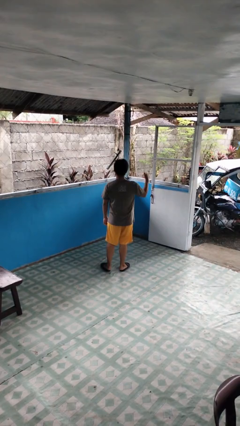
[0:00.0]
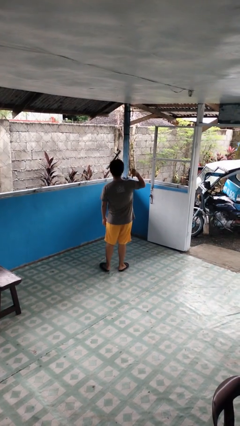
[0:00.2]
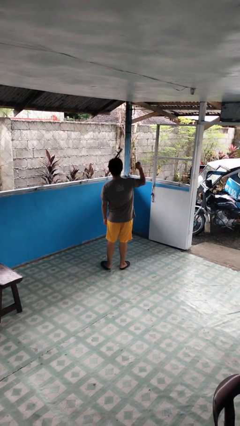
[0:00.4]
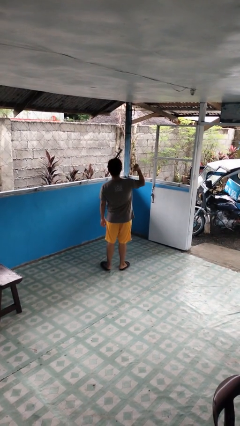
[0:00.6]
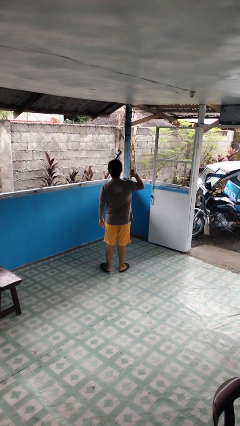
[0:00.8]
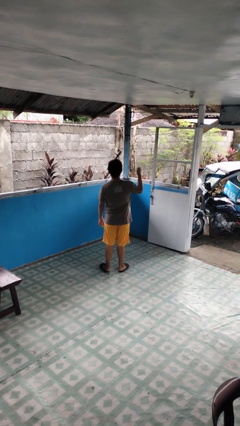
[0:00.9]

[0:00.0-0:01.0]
person gestures behind me

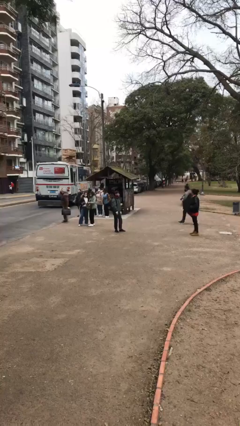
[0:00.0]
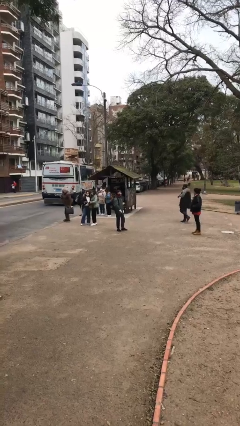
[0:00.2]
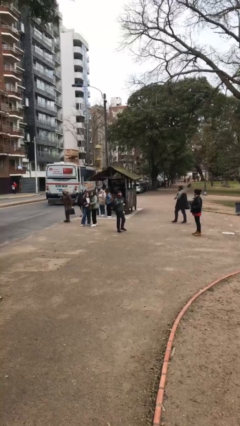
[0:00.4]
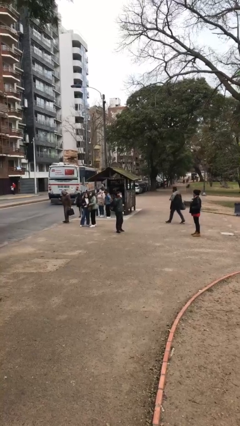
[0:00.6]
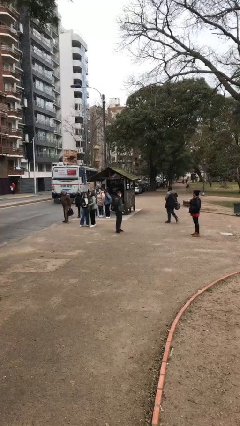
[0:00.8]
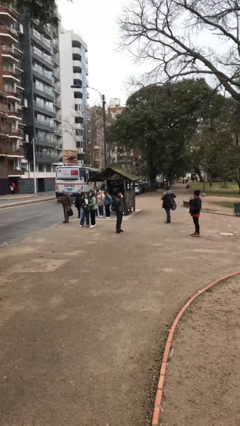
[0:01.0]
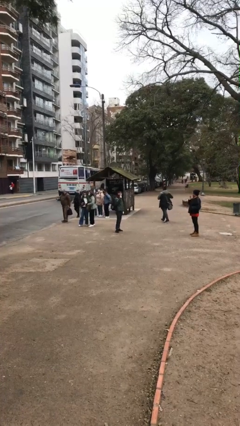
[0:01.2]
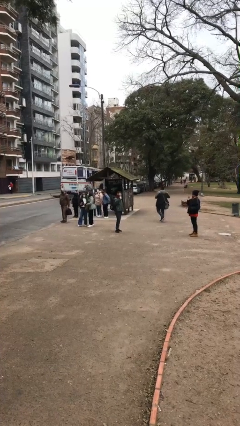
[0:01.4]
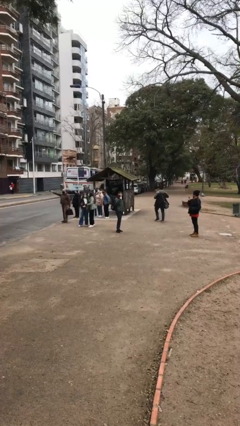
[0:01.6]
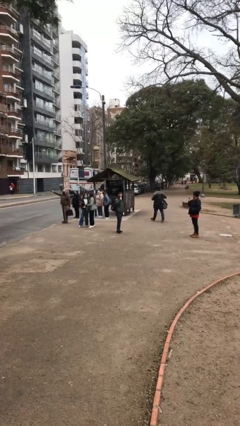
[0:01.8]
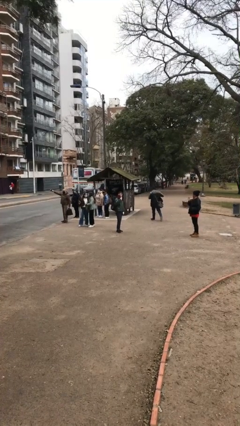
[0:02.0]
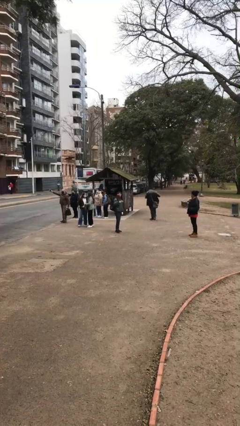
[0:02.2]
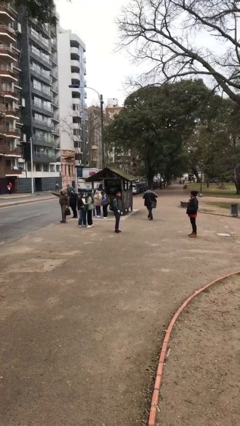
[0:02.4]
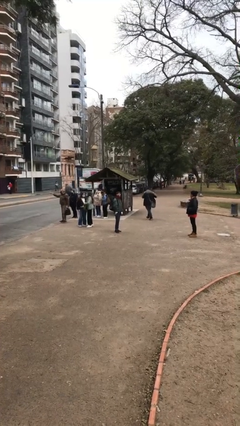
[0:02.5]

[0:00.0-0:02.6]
person waves at person

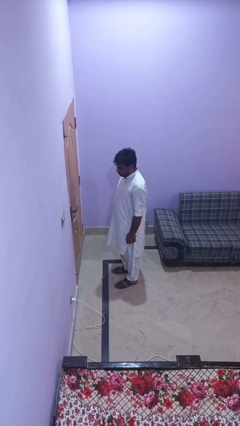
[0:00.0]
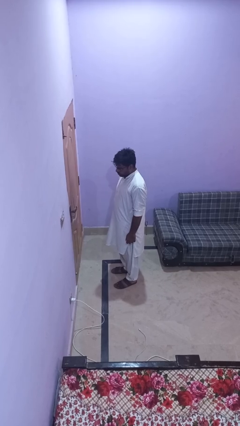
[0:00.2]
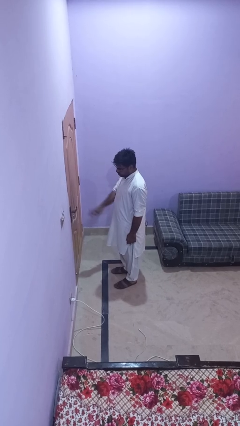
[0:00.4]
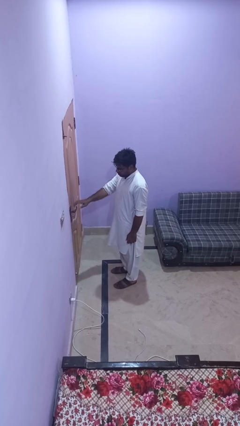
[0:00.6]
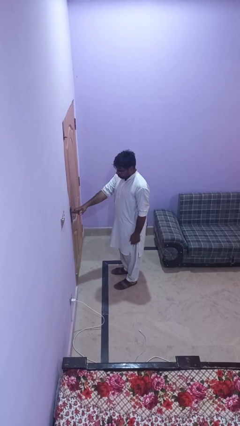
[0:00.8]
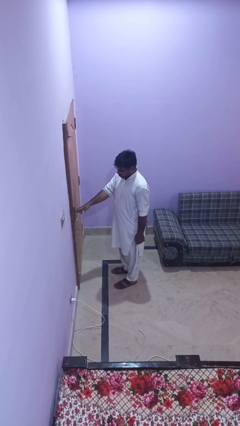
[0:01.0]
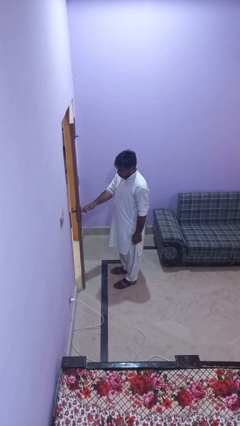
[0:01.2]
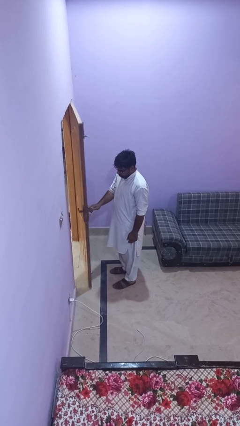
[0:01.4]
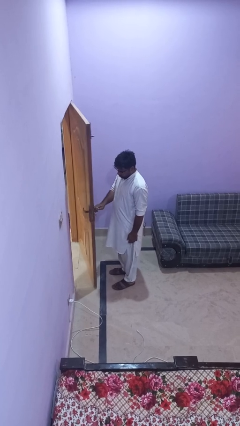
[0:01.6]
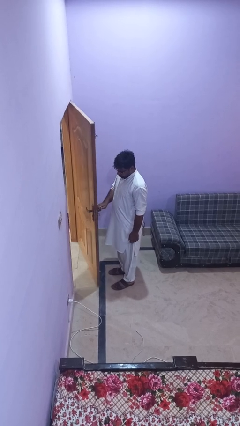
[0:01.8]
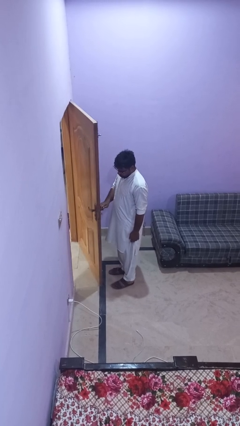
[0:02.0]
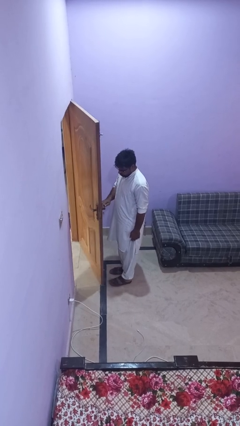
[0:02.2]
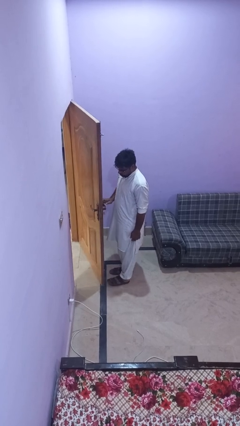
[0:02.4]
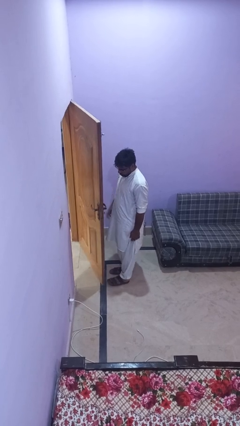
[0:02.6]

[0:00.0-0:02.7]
person opens facility door

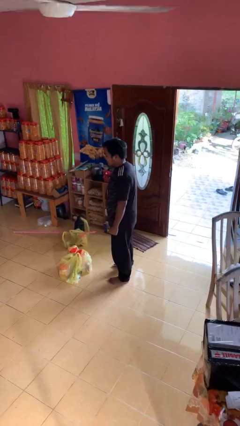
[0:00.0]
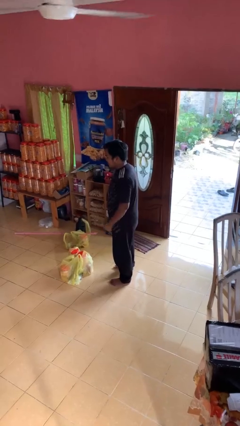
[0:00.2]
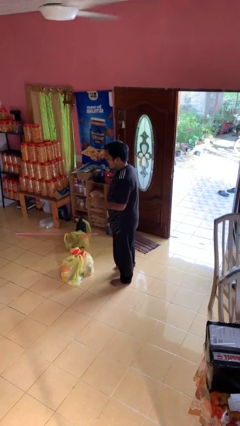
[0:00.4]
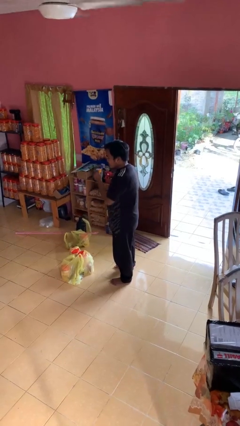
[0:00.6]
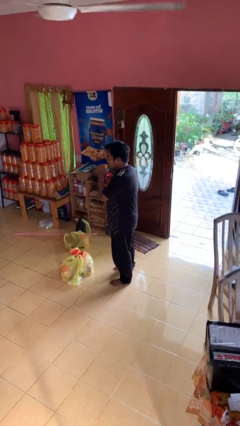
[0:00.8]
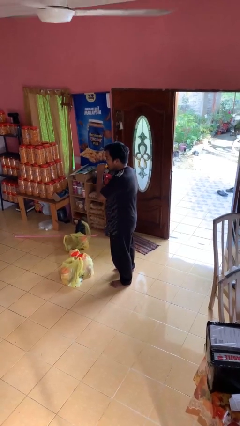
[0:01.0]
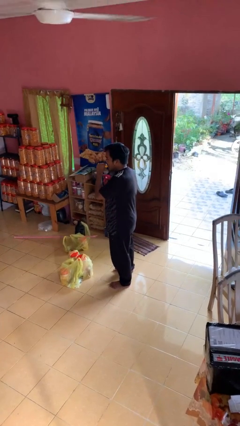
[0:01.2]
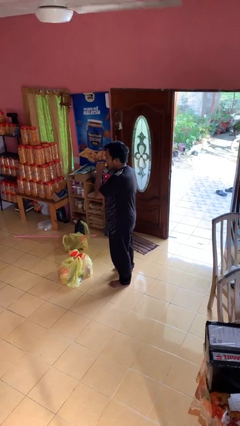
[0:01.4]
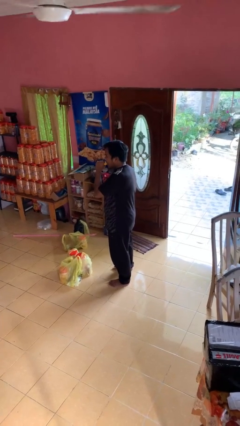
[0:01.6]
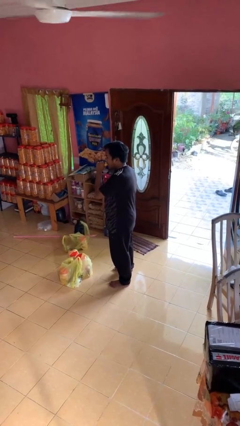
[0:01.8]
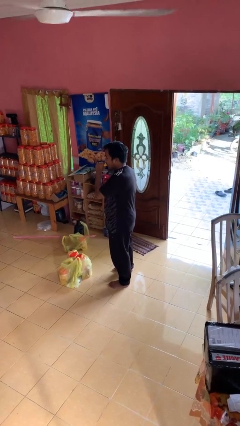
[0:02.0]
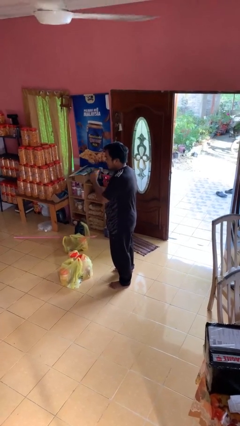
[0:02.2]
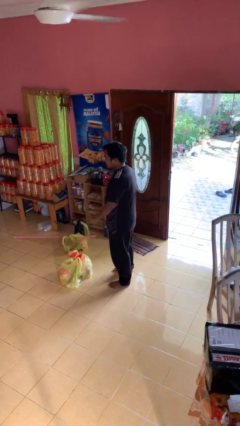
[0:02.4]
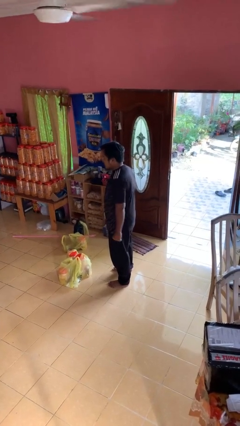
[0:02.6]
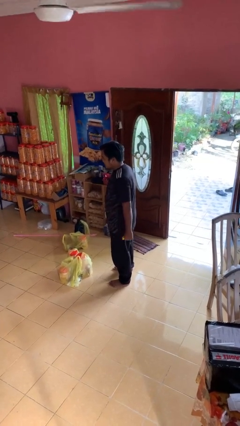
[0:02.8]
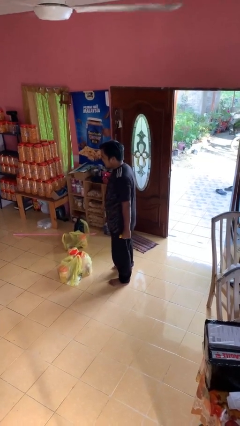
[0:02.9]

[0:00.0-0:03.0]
person eats banana

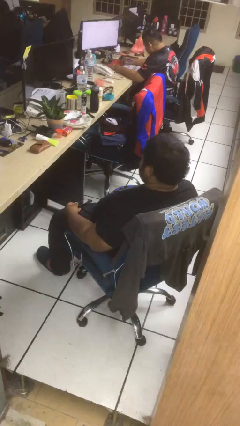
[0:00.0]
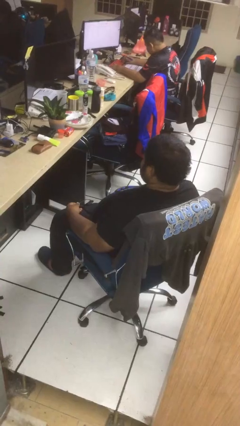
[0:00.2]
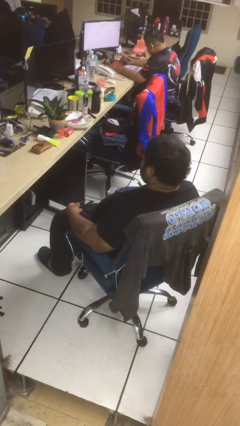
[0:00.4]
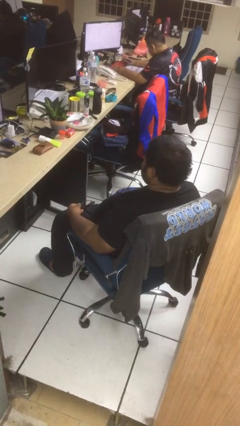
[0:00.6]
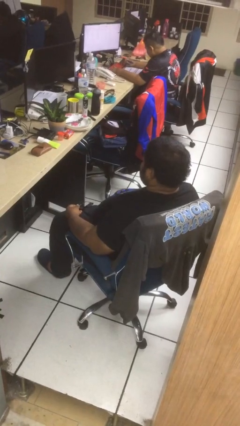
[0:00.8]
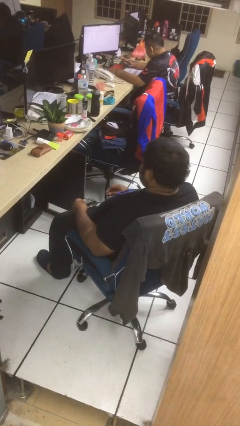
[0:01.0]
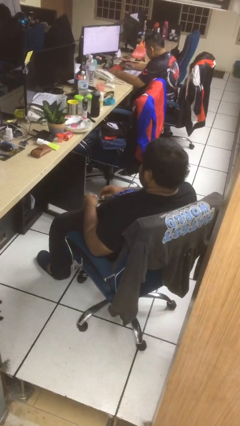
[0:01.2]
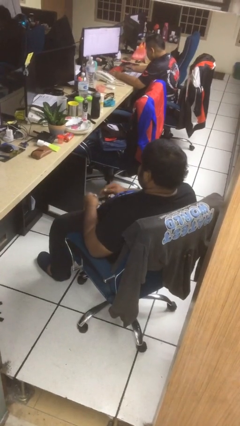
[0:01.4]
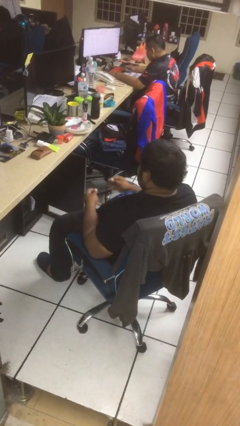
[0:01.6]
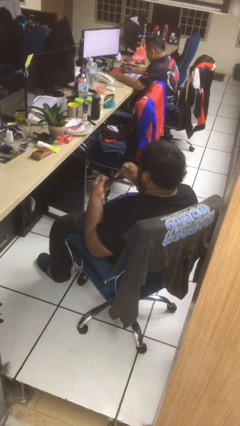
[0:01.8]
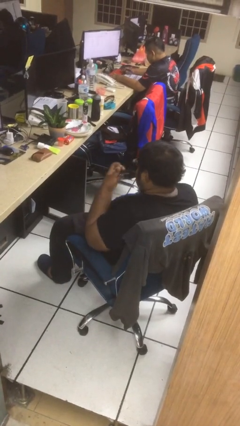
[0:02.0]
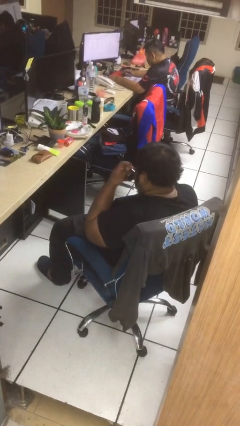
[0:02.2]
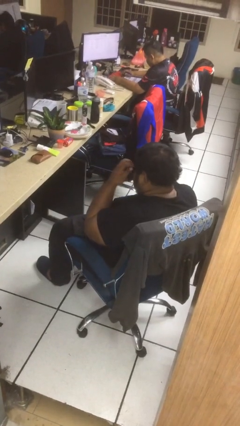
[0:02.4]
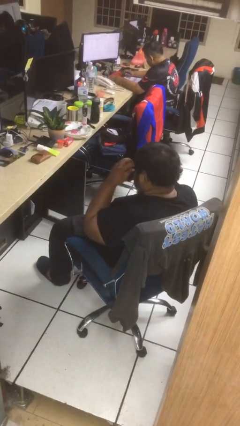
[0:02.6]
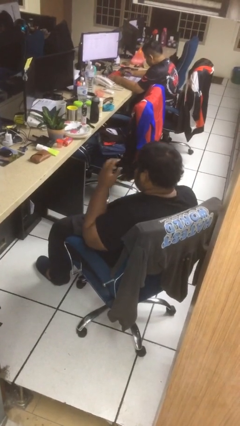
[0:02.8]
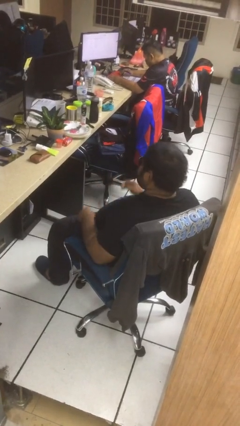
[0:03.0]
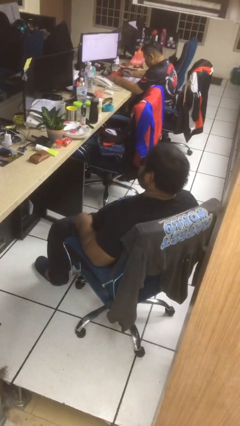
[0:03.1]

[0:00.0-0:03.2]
person puts on sunglasses

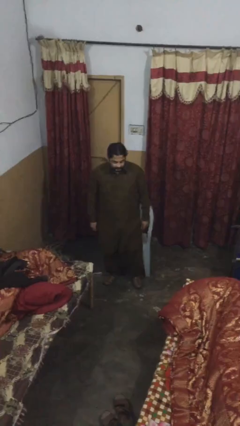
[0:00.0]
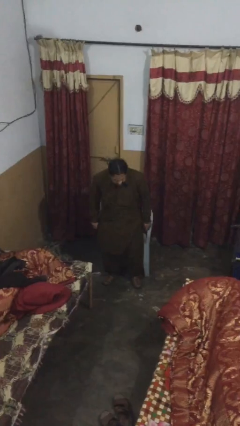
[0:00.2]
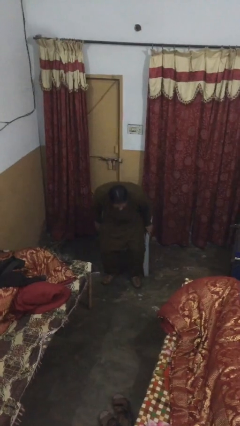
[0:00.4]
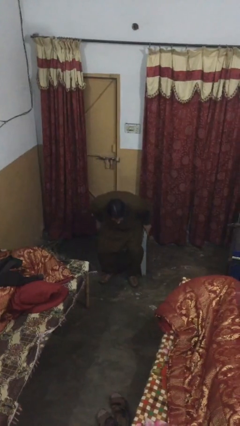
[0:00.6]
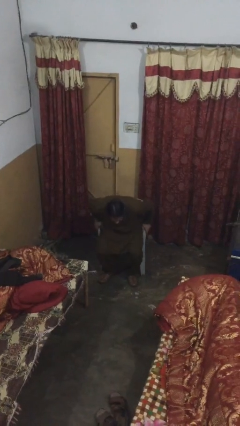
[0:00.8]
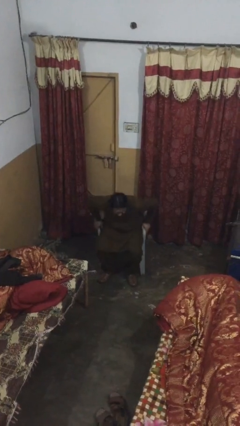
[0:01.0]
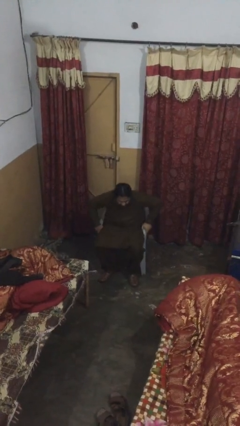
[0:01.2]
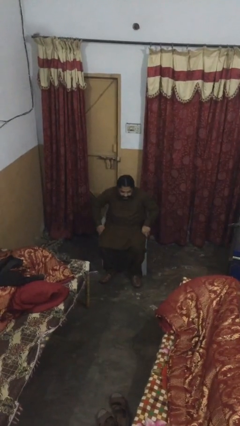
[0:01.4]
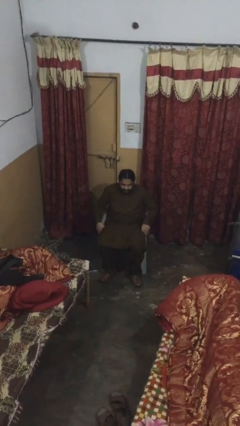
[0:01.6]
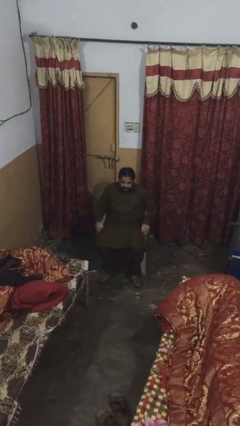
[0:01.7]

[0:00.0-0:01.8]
person sits down

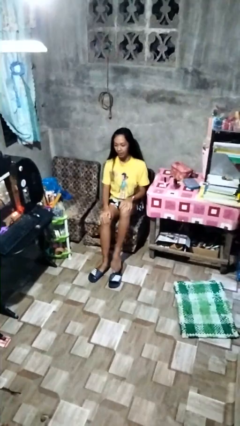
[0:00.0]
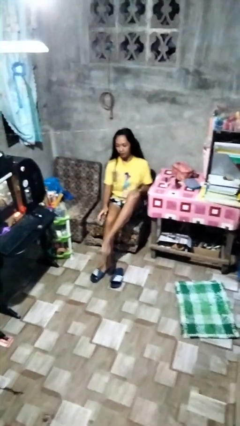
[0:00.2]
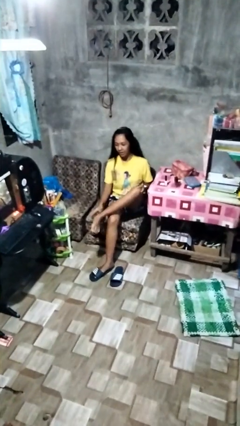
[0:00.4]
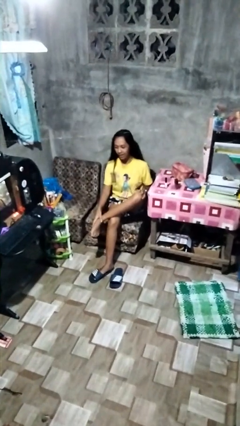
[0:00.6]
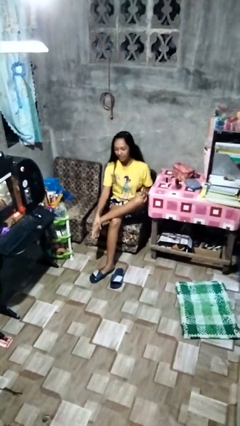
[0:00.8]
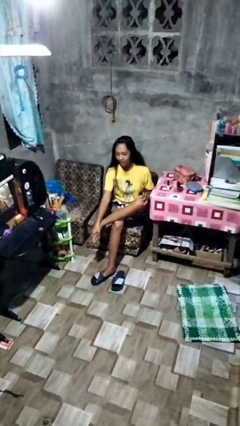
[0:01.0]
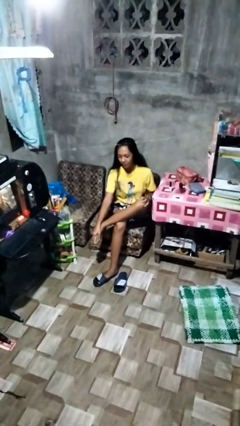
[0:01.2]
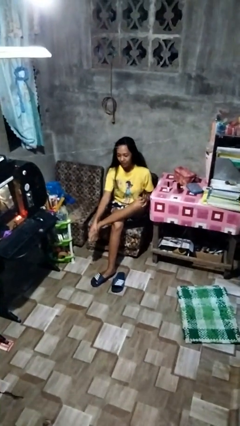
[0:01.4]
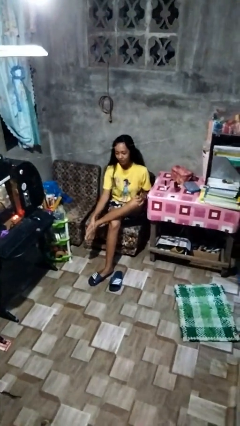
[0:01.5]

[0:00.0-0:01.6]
person rubs foot

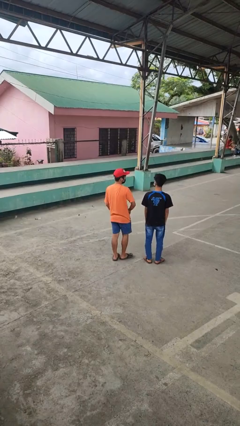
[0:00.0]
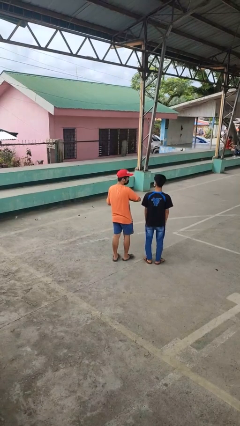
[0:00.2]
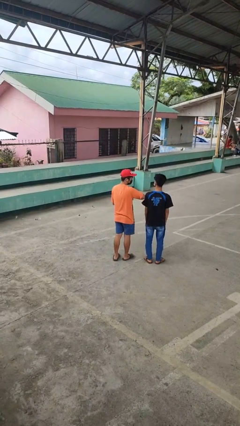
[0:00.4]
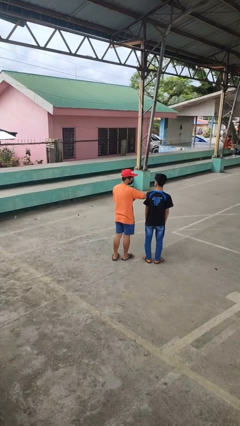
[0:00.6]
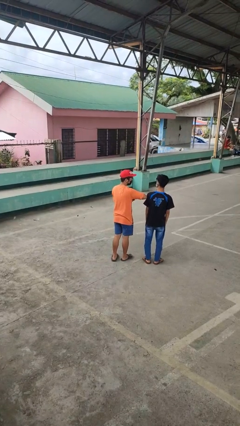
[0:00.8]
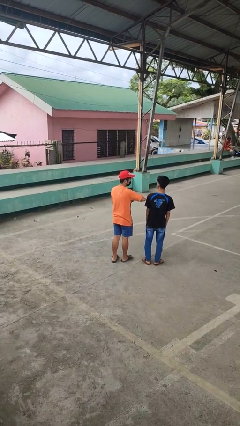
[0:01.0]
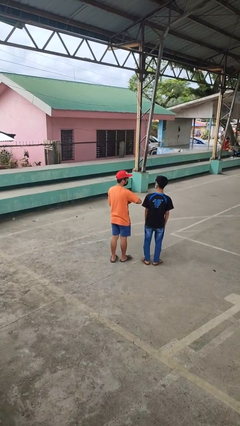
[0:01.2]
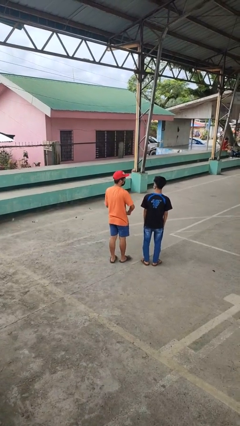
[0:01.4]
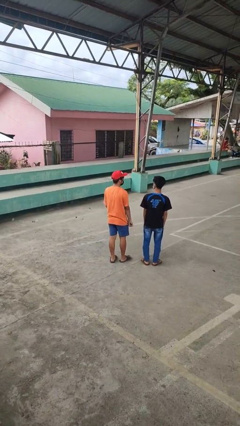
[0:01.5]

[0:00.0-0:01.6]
person nudges person with elbow
